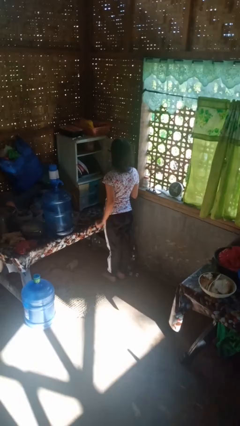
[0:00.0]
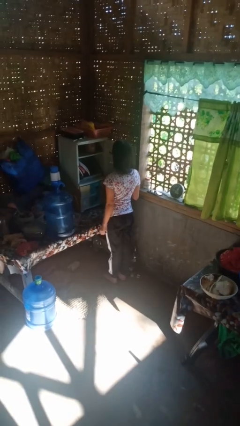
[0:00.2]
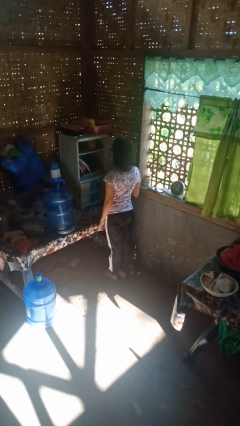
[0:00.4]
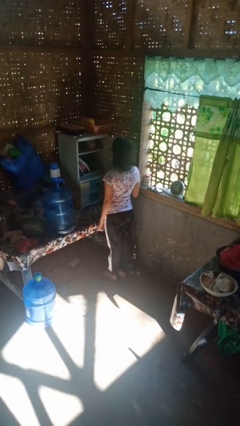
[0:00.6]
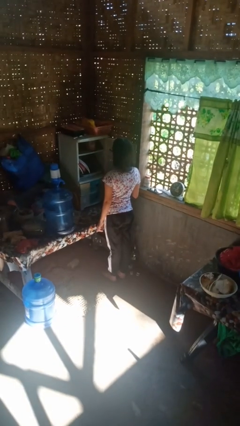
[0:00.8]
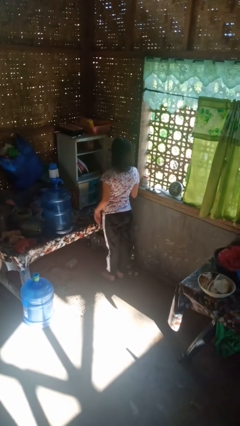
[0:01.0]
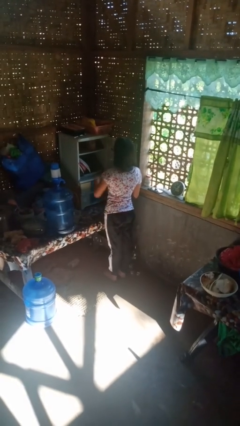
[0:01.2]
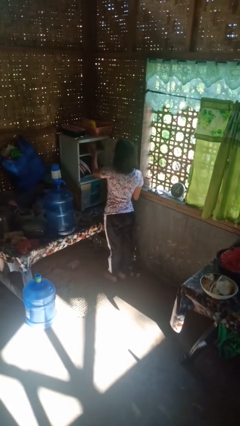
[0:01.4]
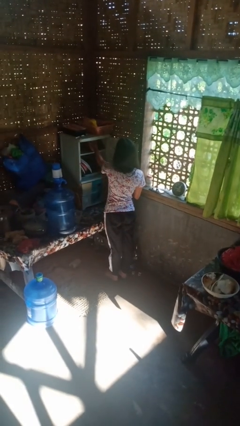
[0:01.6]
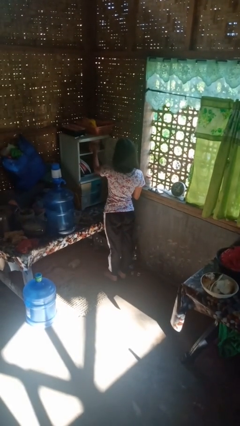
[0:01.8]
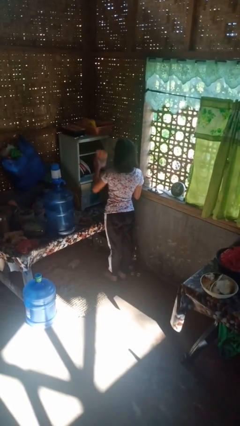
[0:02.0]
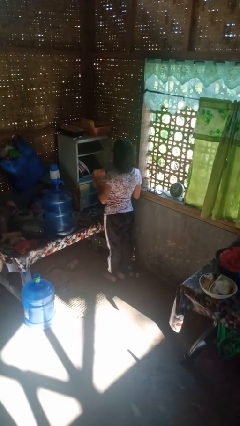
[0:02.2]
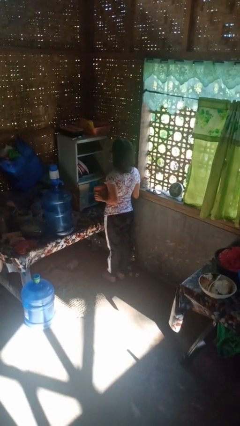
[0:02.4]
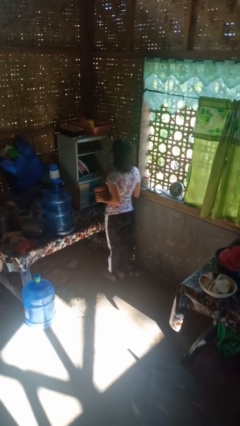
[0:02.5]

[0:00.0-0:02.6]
person picks up object from cabinet

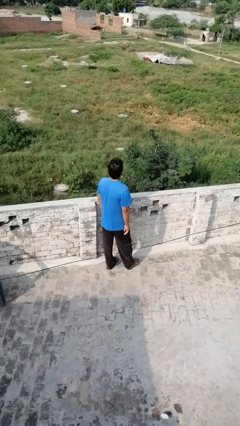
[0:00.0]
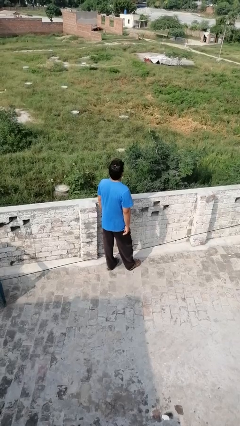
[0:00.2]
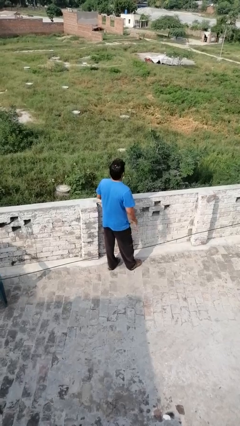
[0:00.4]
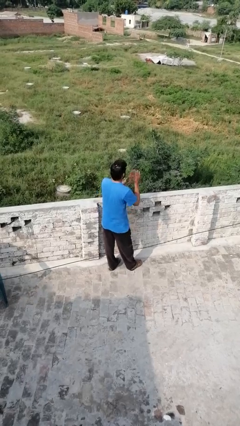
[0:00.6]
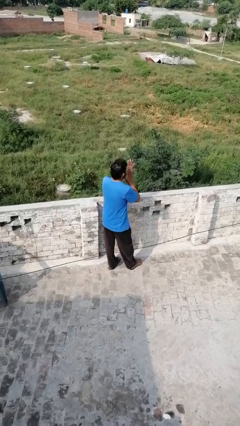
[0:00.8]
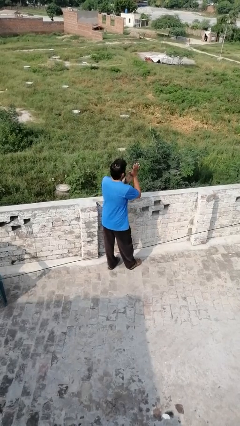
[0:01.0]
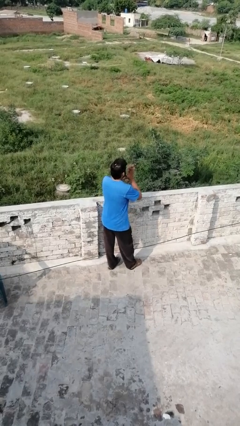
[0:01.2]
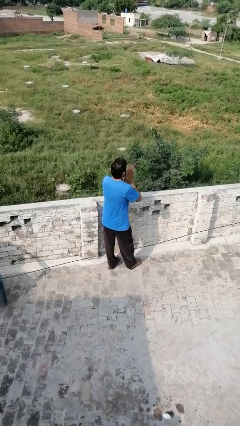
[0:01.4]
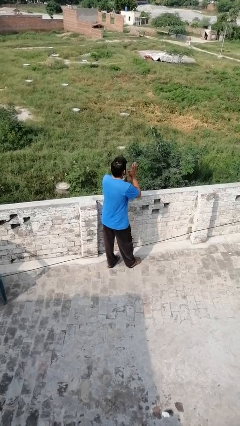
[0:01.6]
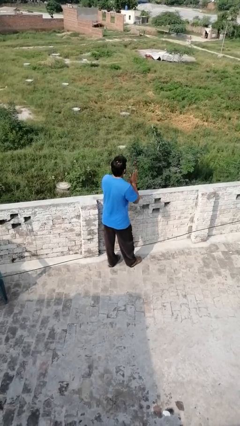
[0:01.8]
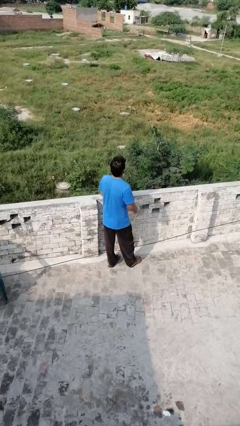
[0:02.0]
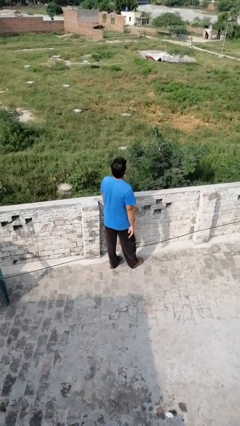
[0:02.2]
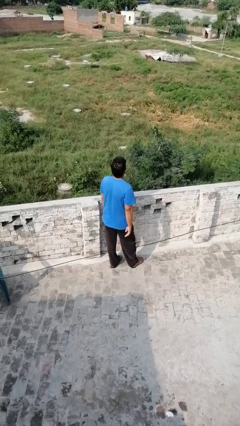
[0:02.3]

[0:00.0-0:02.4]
person blows into hands

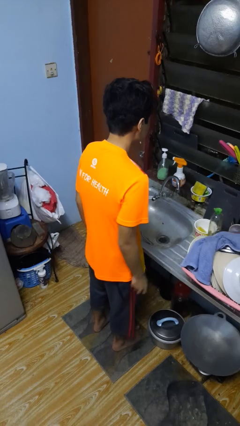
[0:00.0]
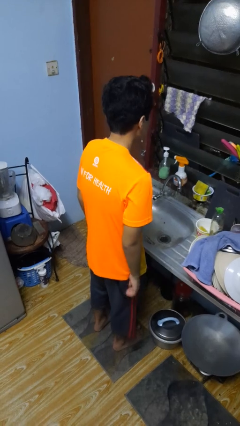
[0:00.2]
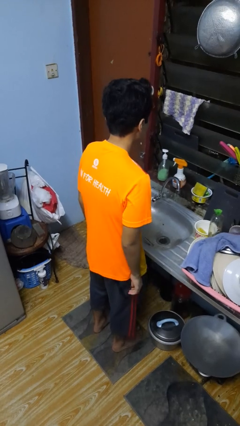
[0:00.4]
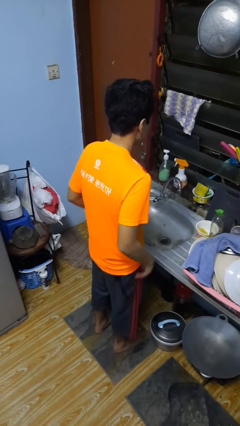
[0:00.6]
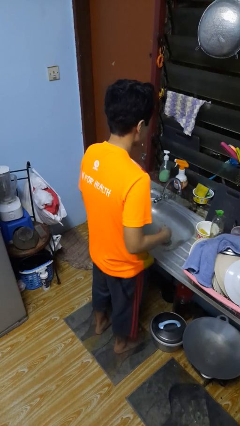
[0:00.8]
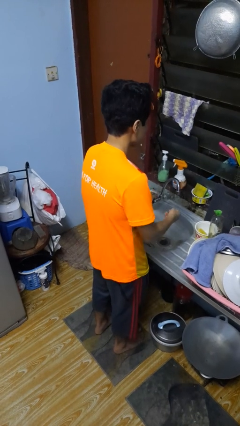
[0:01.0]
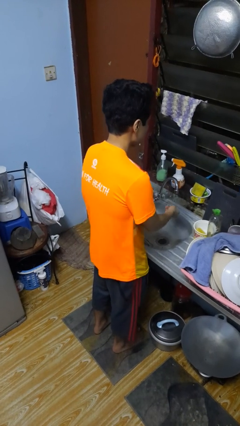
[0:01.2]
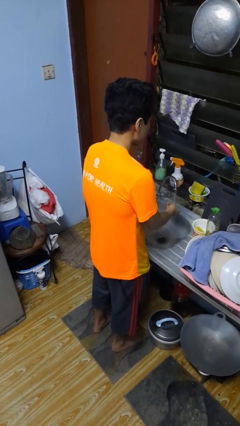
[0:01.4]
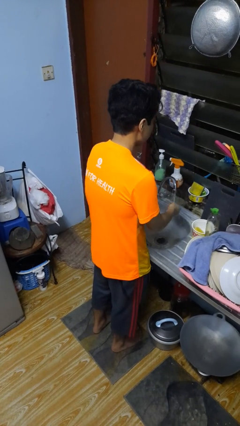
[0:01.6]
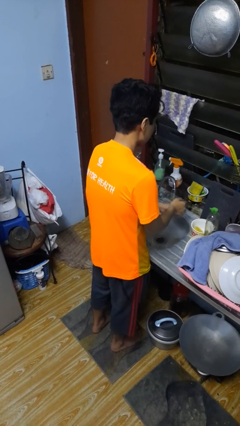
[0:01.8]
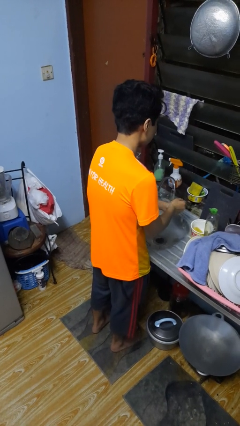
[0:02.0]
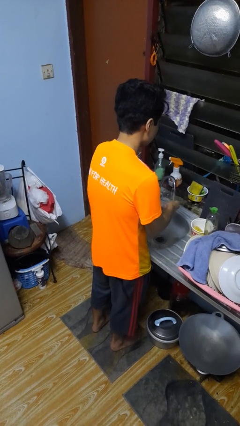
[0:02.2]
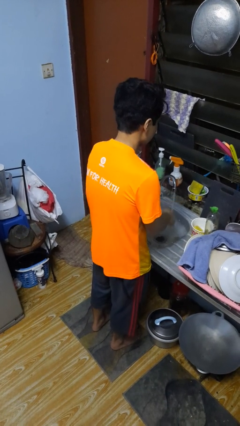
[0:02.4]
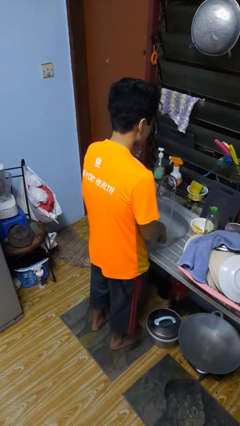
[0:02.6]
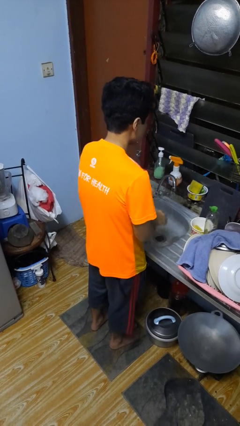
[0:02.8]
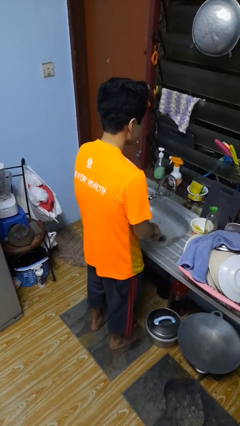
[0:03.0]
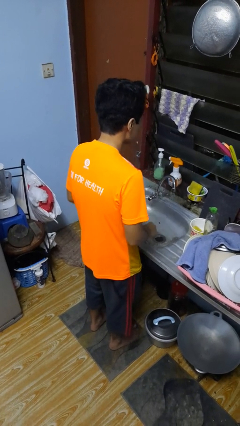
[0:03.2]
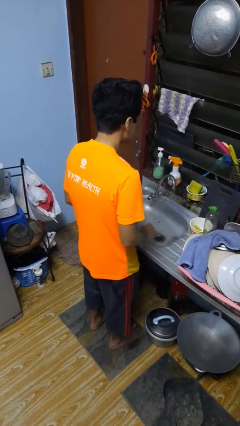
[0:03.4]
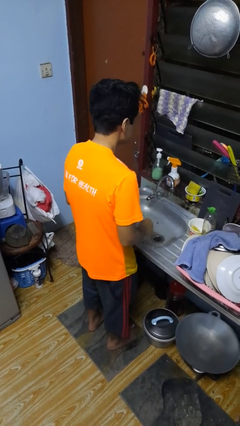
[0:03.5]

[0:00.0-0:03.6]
person washes hands

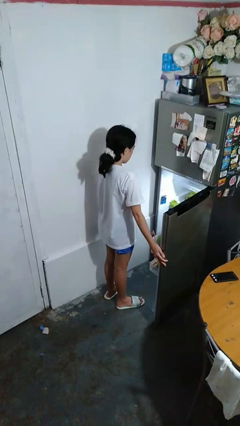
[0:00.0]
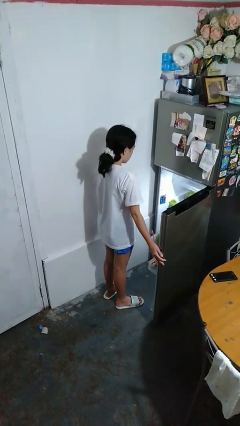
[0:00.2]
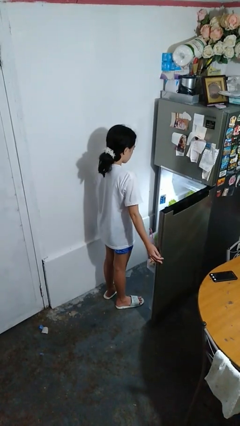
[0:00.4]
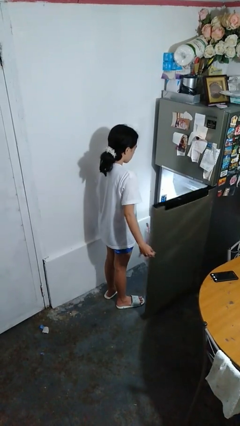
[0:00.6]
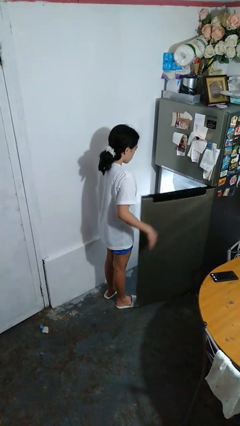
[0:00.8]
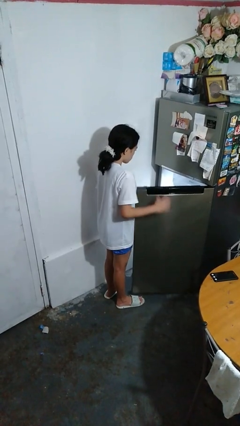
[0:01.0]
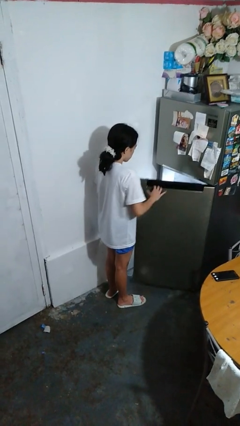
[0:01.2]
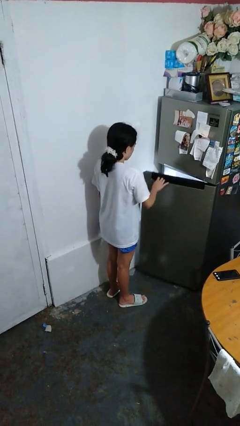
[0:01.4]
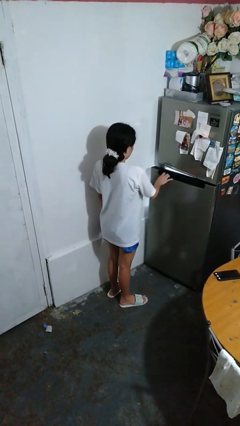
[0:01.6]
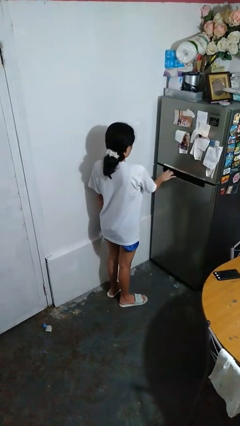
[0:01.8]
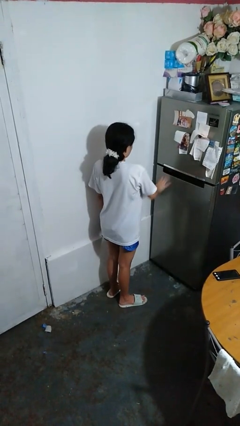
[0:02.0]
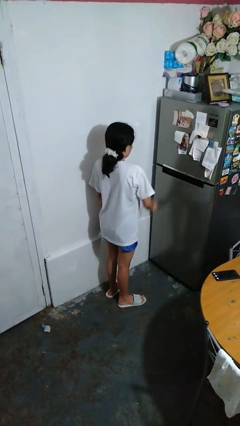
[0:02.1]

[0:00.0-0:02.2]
person closes refrigerator

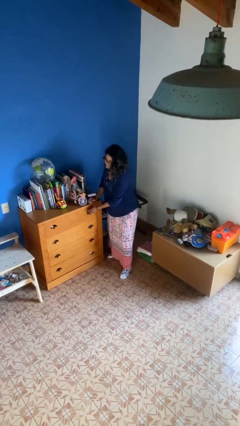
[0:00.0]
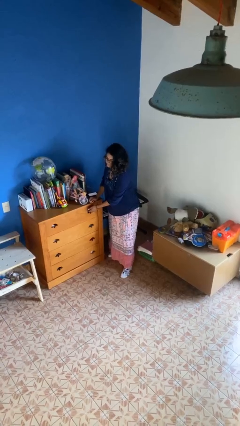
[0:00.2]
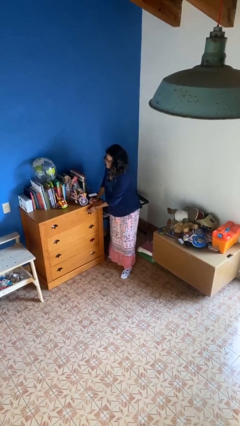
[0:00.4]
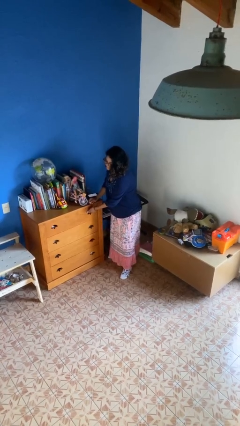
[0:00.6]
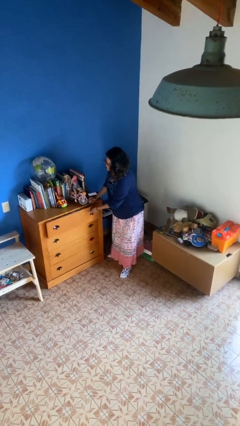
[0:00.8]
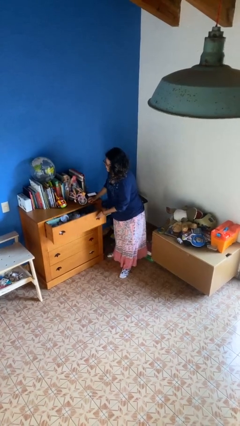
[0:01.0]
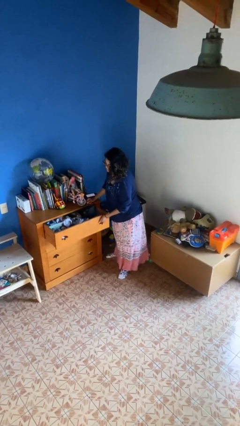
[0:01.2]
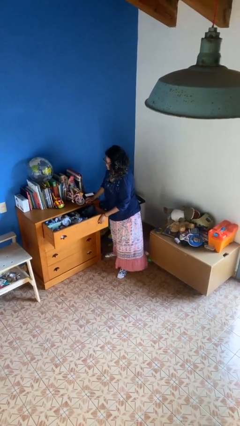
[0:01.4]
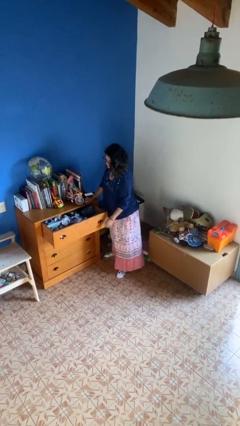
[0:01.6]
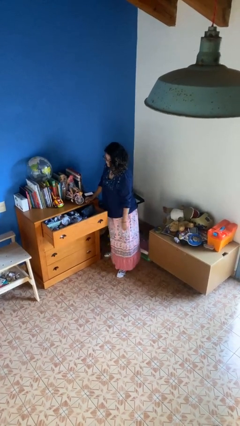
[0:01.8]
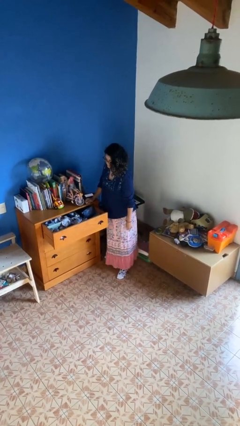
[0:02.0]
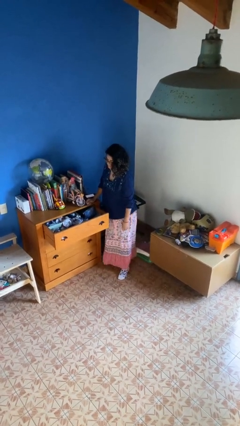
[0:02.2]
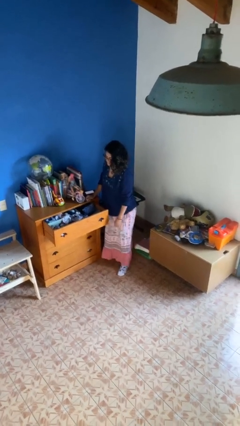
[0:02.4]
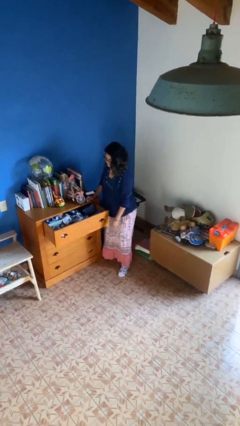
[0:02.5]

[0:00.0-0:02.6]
person opens dresser drawer

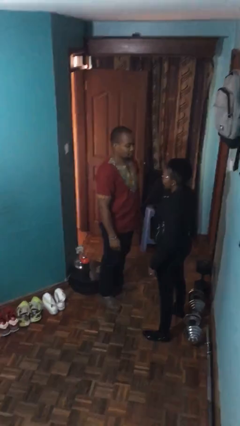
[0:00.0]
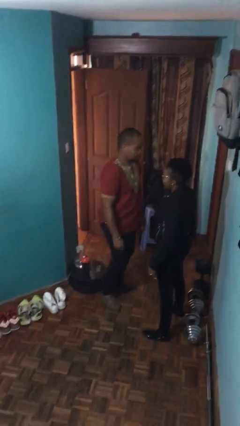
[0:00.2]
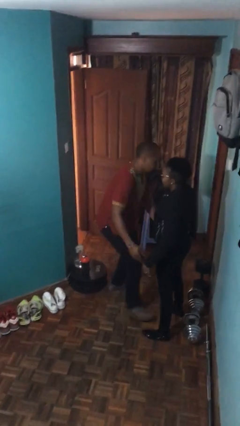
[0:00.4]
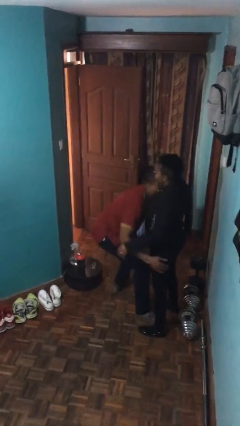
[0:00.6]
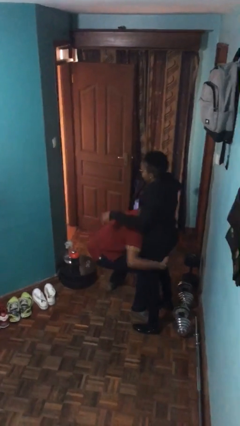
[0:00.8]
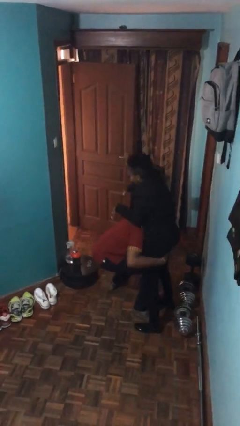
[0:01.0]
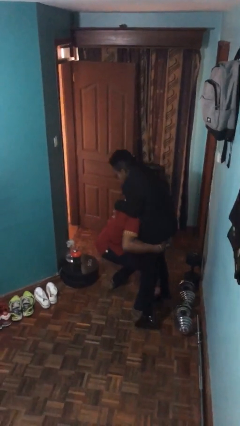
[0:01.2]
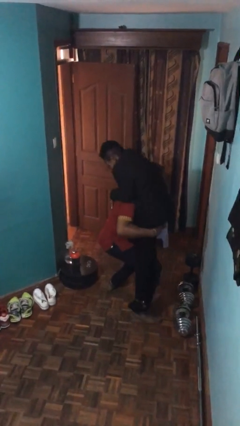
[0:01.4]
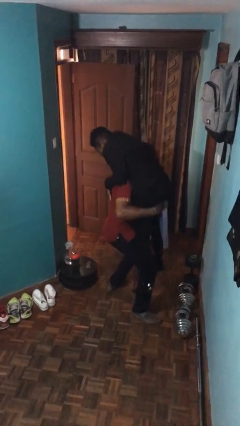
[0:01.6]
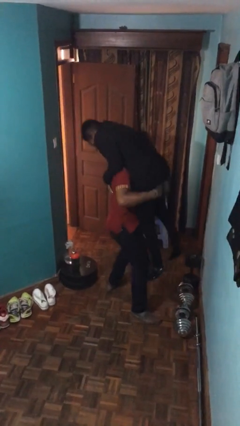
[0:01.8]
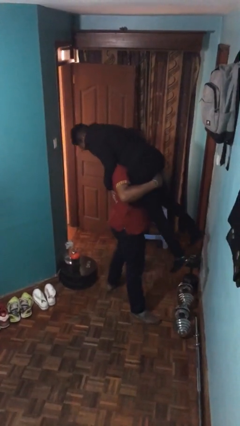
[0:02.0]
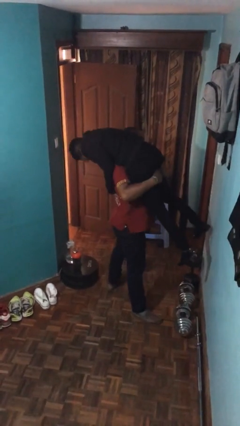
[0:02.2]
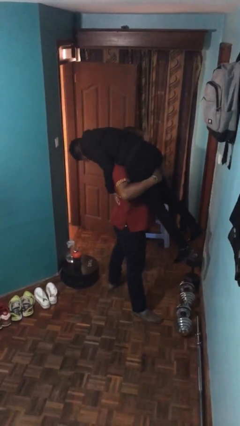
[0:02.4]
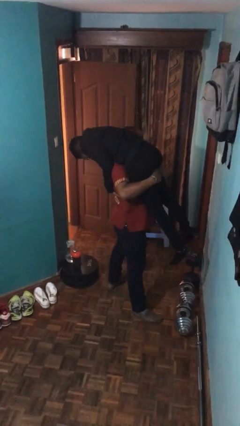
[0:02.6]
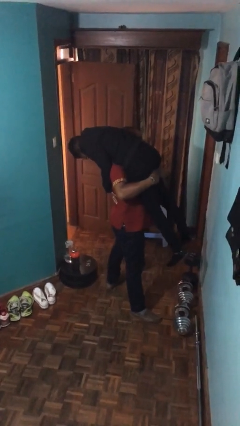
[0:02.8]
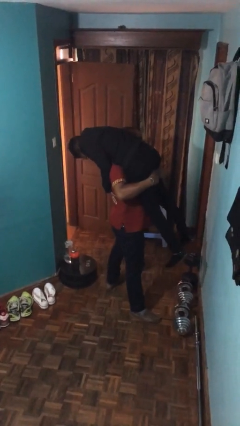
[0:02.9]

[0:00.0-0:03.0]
person carries person over shoulder

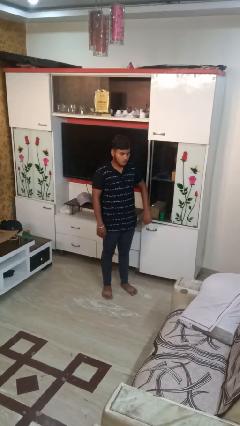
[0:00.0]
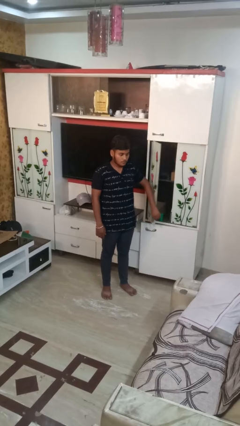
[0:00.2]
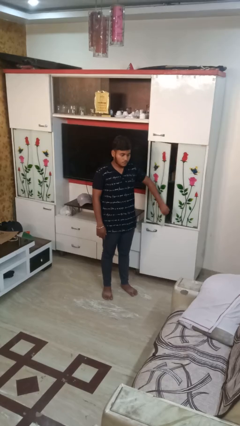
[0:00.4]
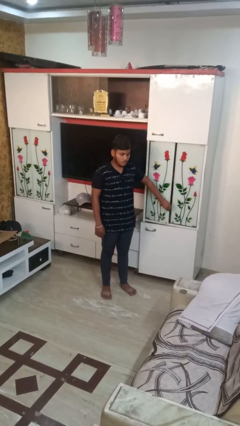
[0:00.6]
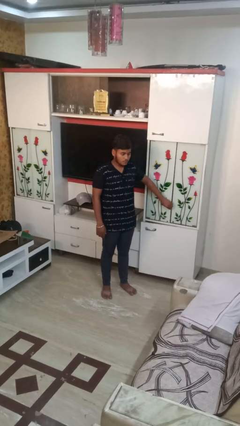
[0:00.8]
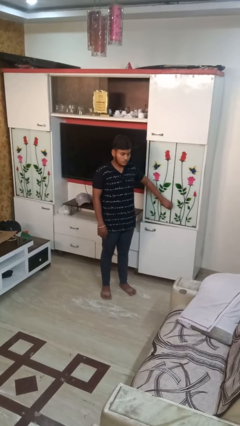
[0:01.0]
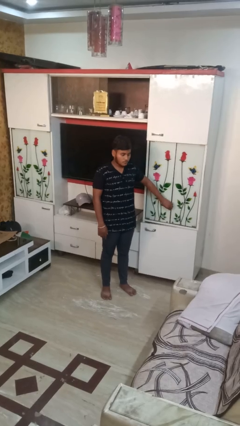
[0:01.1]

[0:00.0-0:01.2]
person closes closet door
